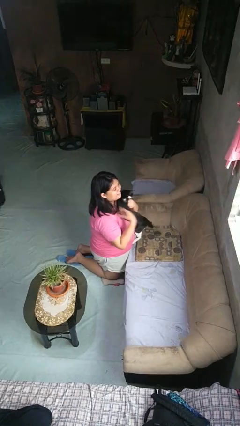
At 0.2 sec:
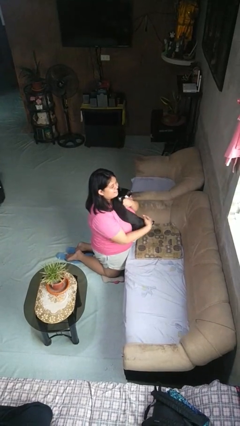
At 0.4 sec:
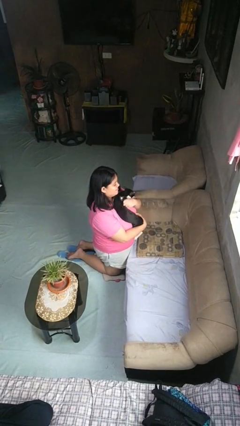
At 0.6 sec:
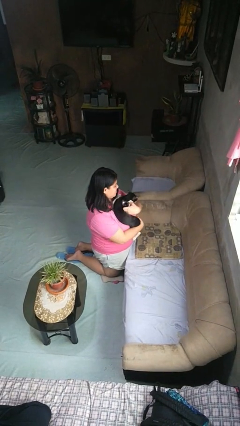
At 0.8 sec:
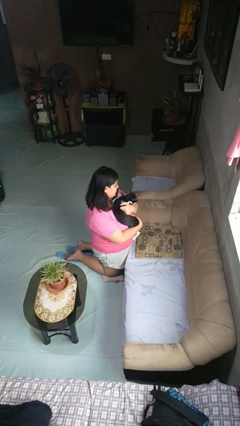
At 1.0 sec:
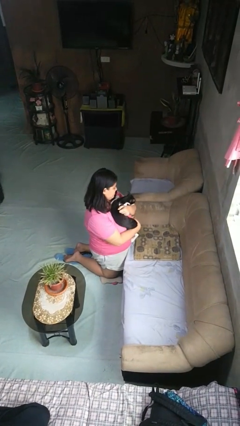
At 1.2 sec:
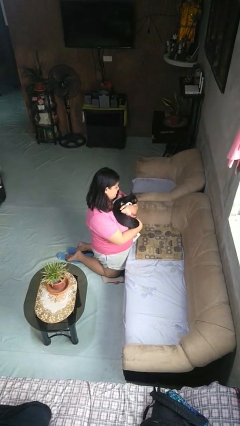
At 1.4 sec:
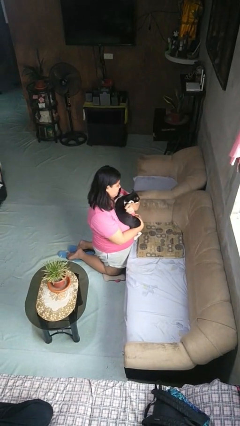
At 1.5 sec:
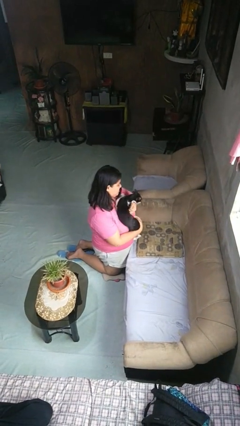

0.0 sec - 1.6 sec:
person hugs cat

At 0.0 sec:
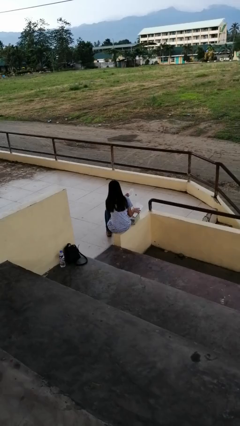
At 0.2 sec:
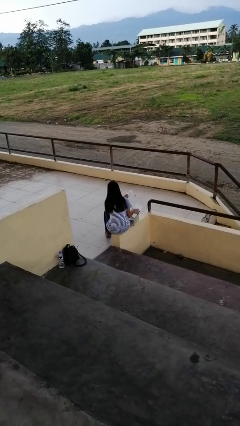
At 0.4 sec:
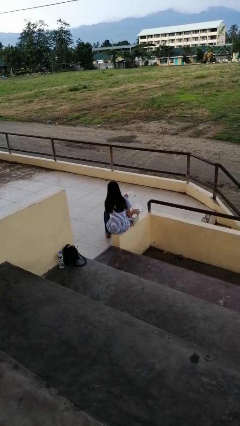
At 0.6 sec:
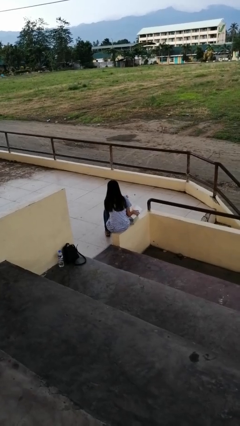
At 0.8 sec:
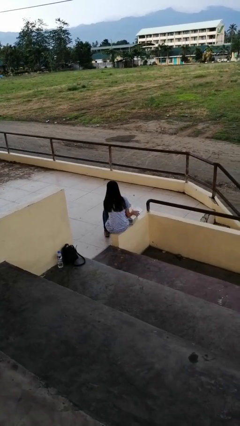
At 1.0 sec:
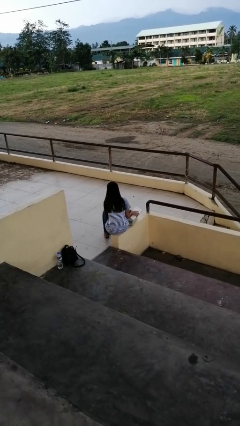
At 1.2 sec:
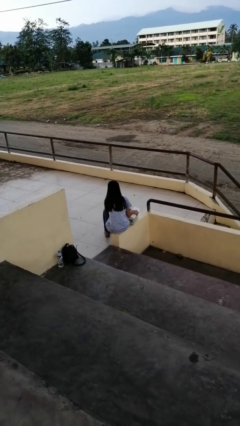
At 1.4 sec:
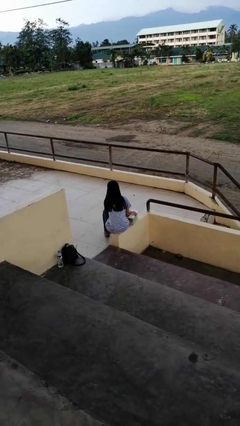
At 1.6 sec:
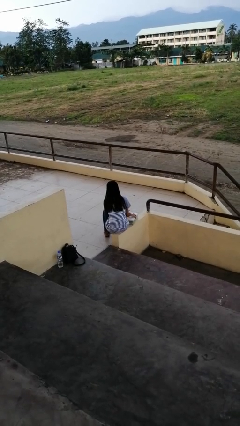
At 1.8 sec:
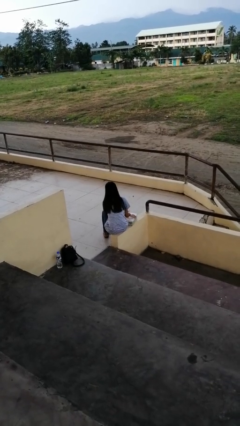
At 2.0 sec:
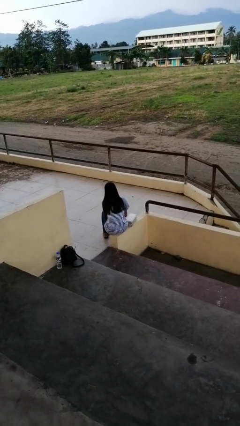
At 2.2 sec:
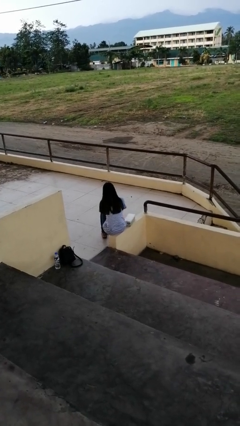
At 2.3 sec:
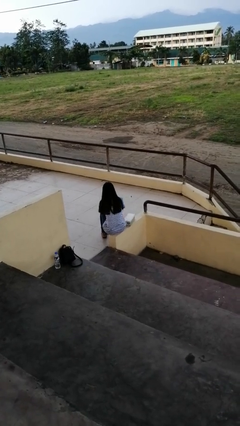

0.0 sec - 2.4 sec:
person puts object into box

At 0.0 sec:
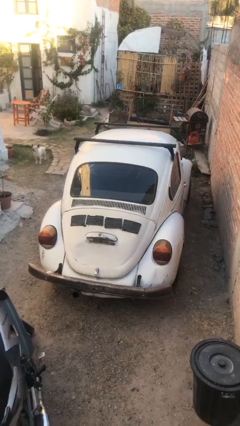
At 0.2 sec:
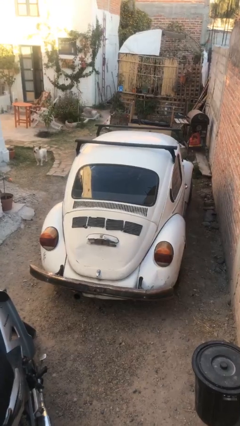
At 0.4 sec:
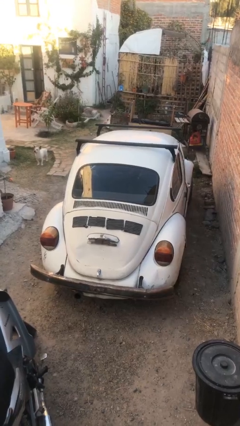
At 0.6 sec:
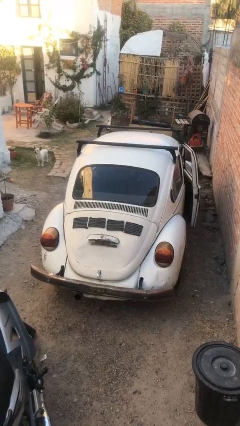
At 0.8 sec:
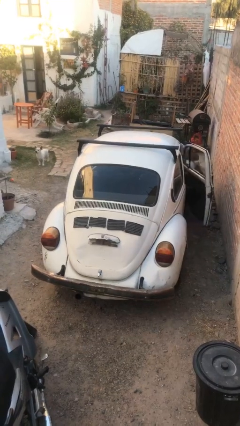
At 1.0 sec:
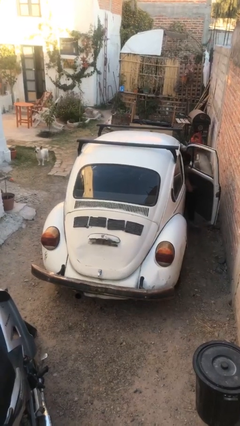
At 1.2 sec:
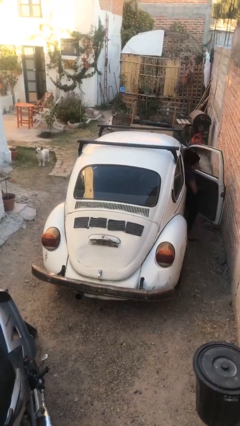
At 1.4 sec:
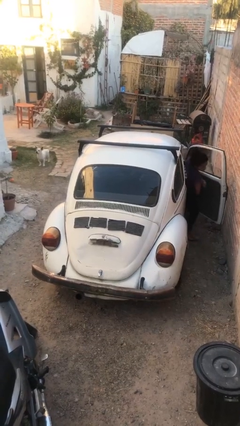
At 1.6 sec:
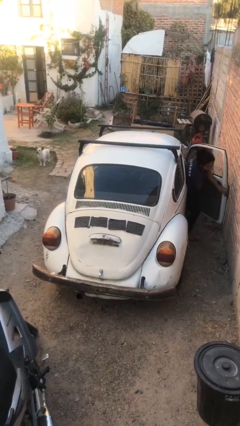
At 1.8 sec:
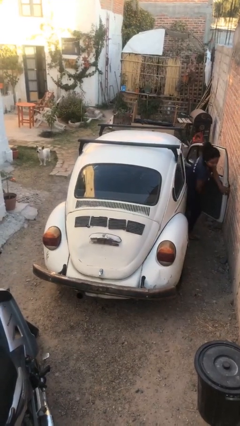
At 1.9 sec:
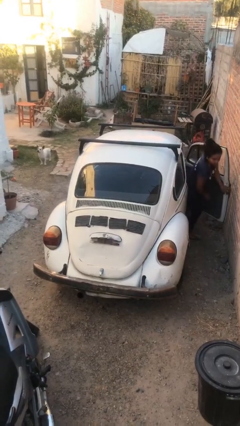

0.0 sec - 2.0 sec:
car drops off person

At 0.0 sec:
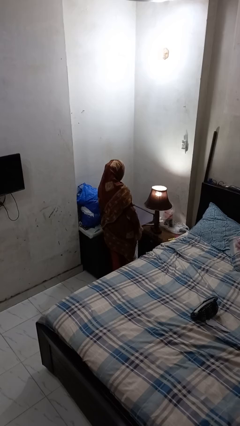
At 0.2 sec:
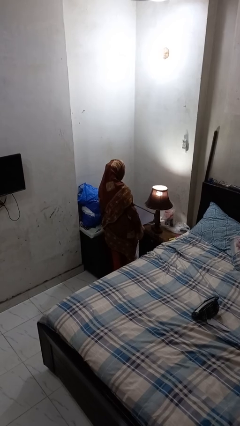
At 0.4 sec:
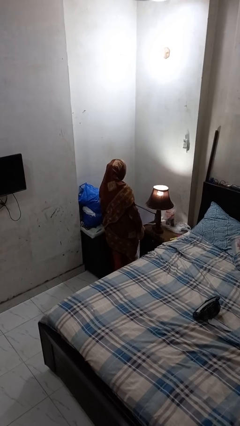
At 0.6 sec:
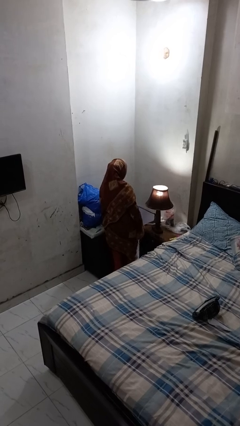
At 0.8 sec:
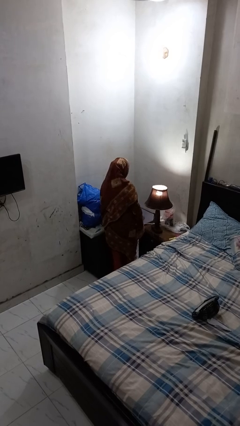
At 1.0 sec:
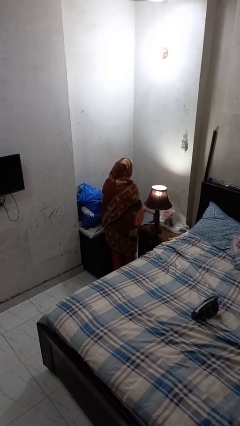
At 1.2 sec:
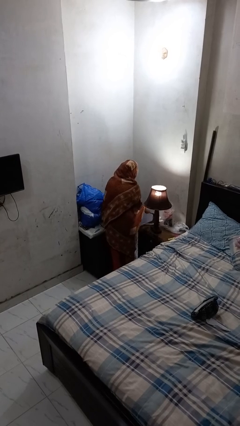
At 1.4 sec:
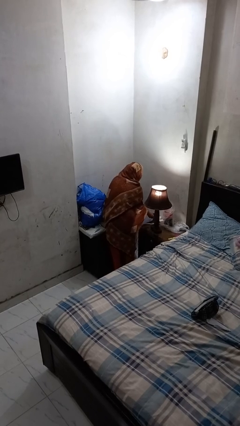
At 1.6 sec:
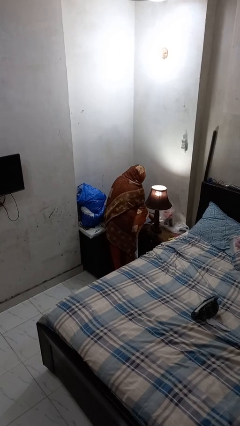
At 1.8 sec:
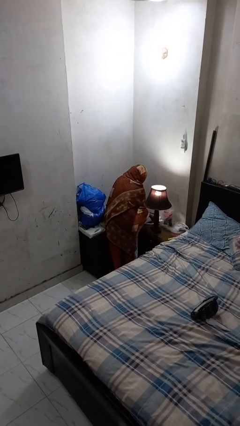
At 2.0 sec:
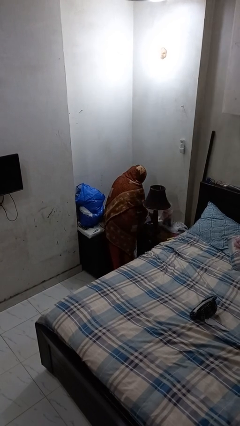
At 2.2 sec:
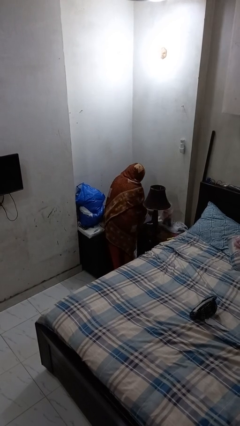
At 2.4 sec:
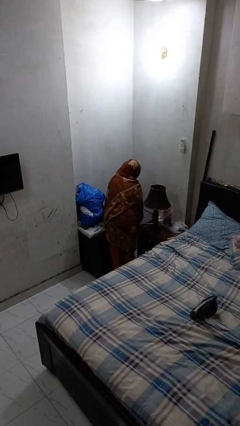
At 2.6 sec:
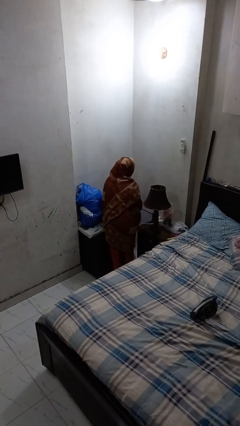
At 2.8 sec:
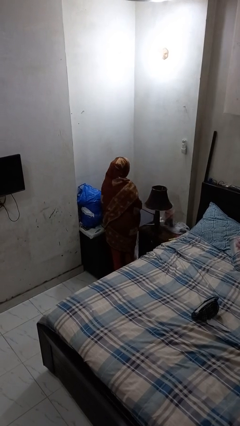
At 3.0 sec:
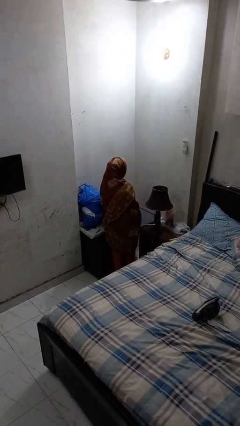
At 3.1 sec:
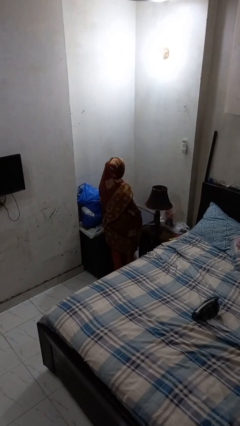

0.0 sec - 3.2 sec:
person turns off lamp

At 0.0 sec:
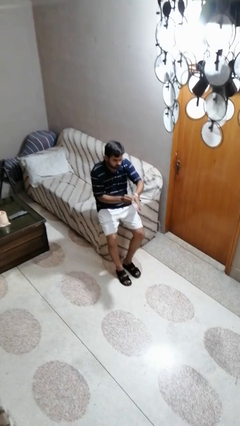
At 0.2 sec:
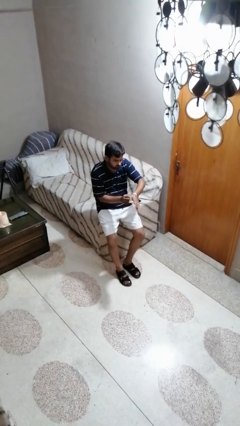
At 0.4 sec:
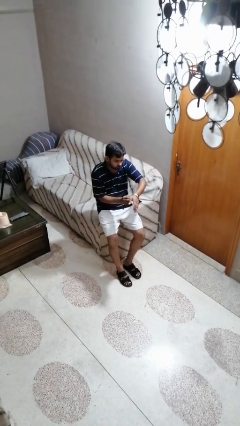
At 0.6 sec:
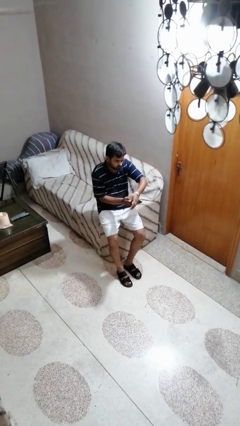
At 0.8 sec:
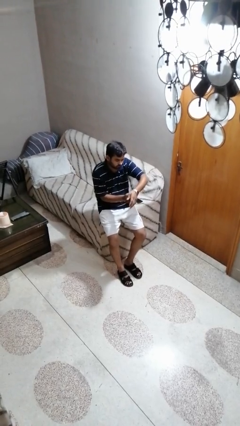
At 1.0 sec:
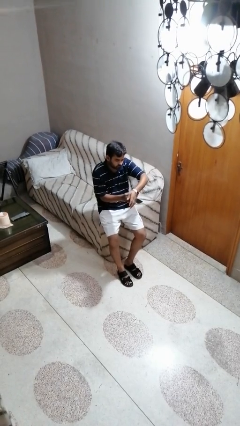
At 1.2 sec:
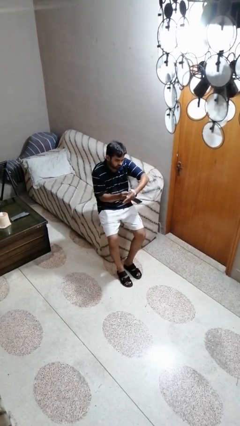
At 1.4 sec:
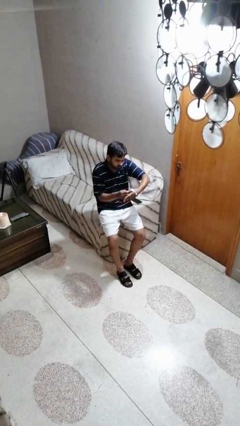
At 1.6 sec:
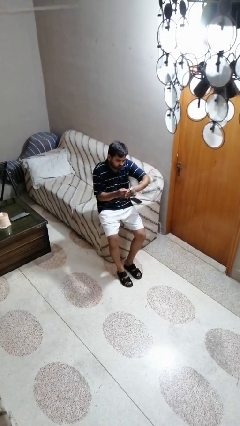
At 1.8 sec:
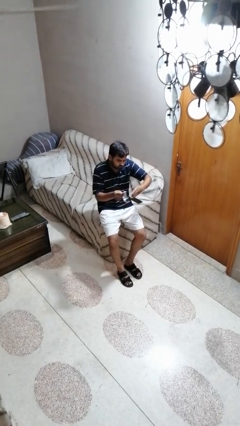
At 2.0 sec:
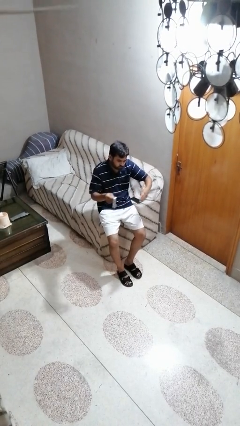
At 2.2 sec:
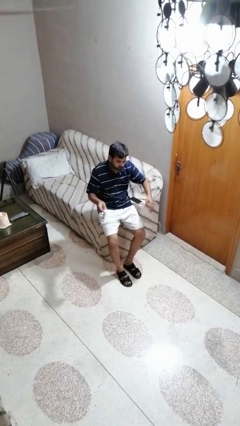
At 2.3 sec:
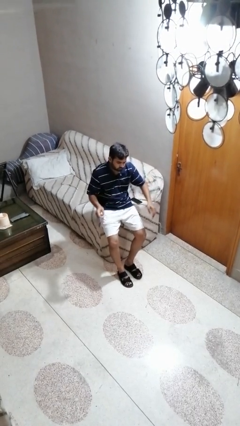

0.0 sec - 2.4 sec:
person takes off wristwatch

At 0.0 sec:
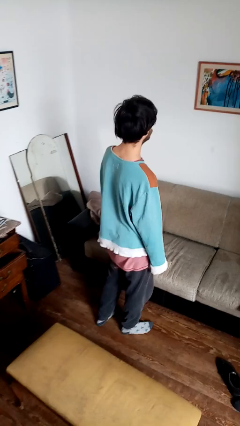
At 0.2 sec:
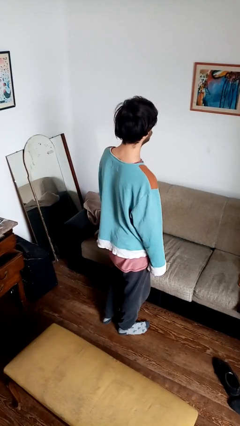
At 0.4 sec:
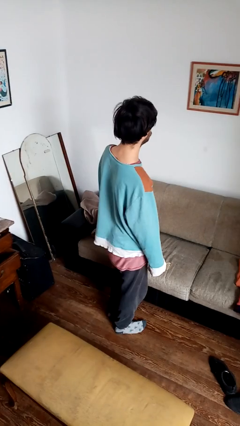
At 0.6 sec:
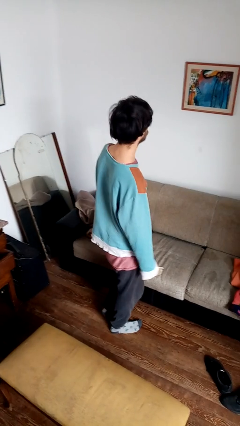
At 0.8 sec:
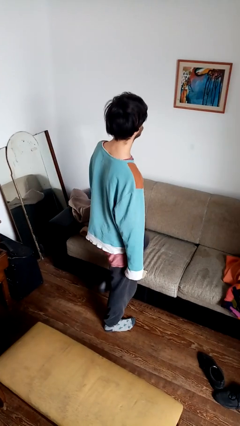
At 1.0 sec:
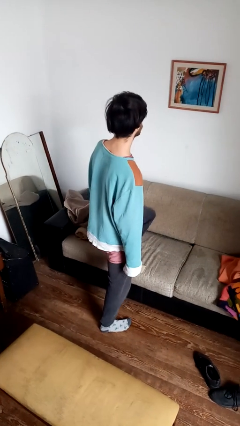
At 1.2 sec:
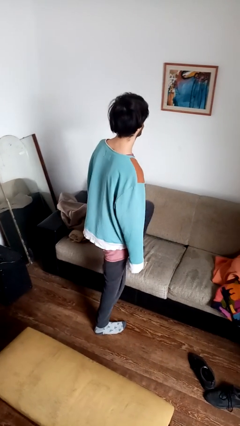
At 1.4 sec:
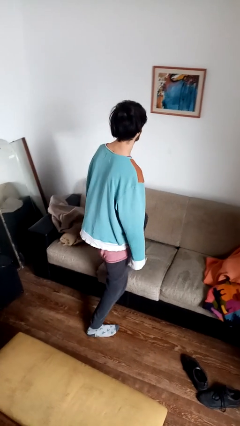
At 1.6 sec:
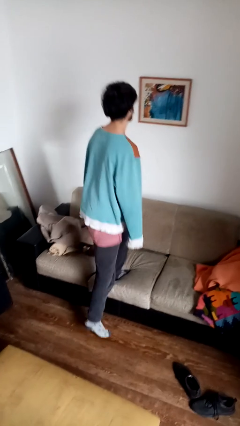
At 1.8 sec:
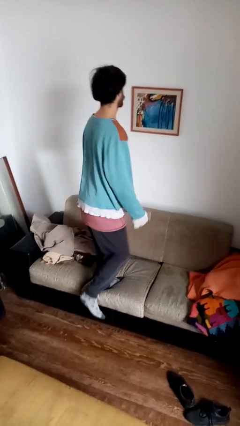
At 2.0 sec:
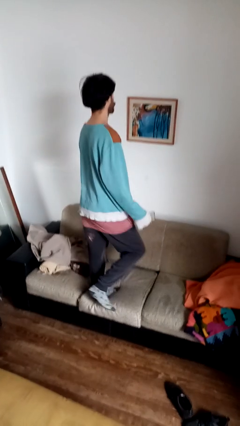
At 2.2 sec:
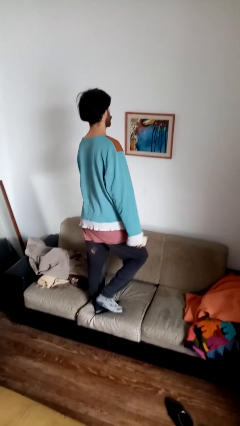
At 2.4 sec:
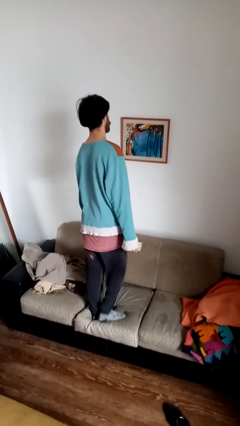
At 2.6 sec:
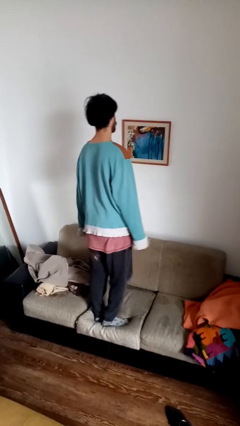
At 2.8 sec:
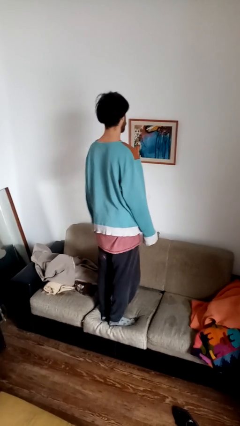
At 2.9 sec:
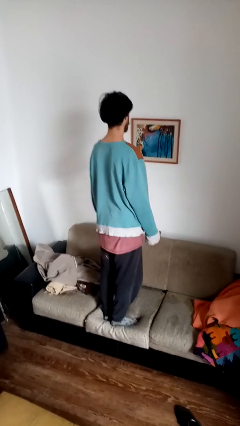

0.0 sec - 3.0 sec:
person climbs on couch

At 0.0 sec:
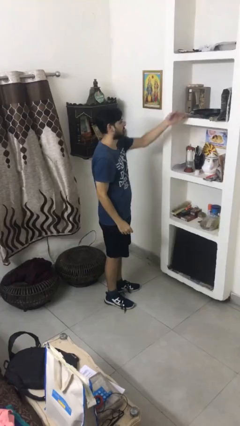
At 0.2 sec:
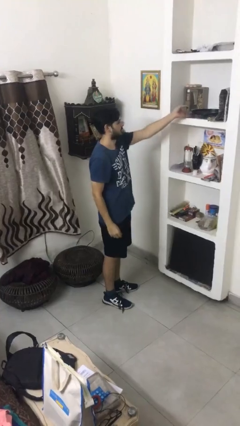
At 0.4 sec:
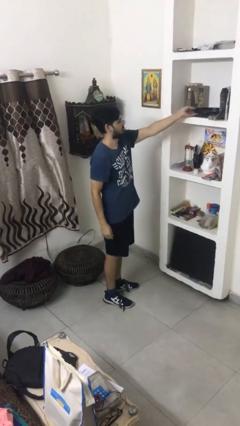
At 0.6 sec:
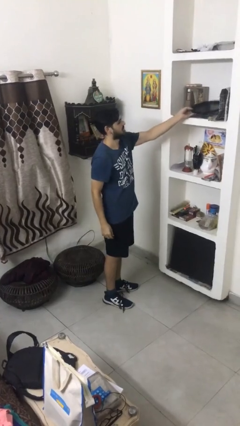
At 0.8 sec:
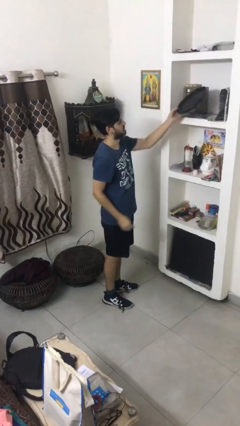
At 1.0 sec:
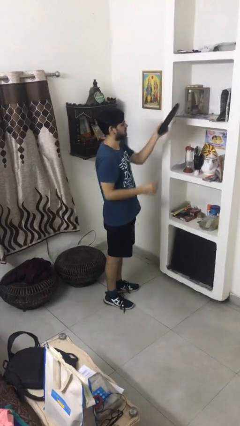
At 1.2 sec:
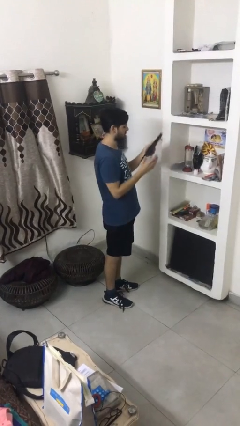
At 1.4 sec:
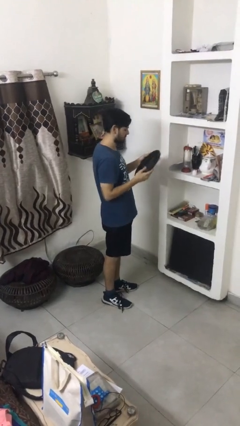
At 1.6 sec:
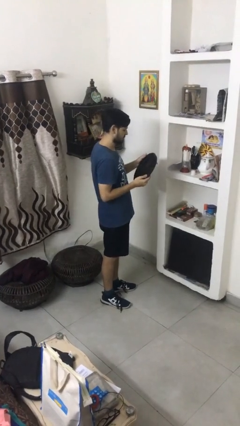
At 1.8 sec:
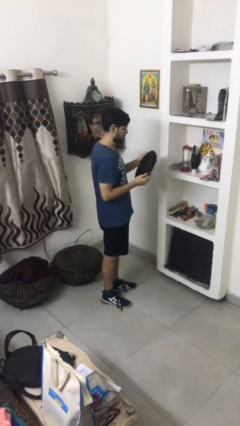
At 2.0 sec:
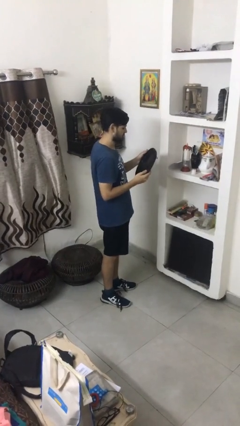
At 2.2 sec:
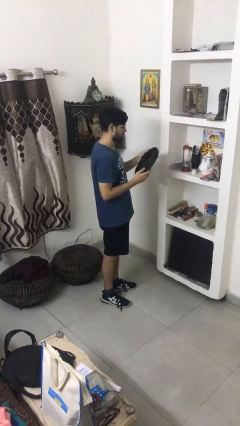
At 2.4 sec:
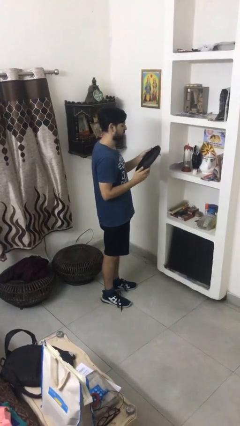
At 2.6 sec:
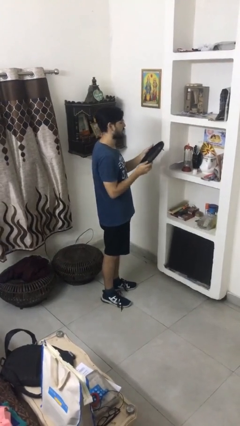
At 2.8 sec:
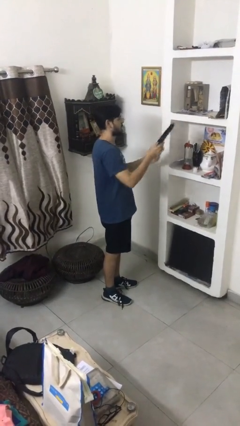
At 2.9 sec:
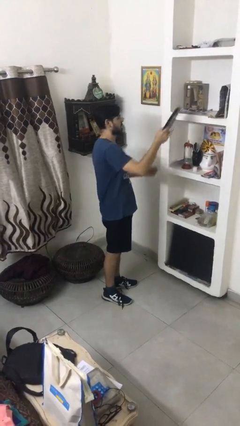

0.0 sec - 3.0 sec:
person picks up object from shelf
